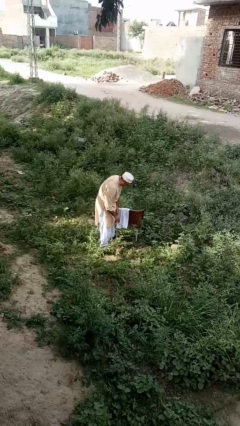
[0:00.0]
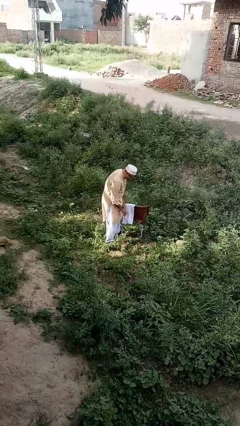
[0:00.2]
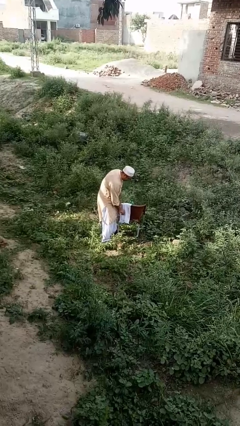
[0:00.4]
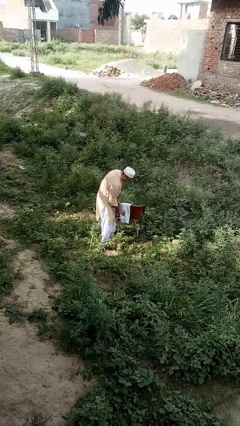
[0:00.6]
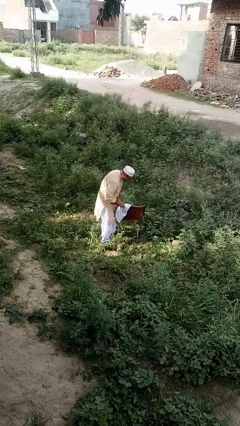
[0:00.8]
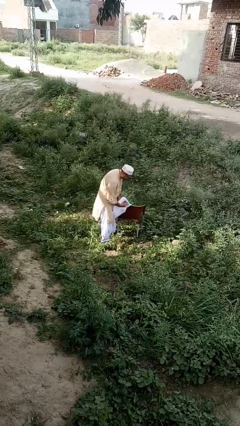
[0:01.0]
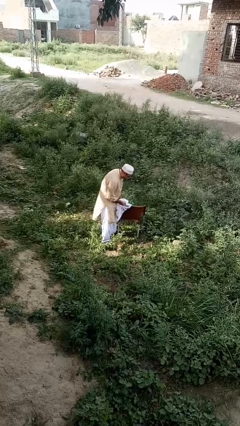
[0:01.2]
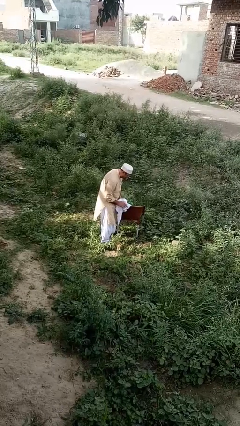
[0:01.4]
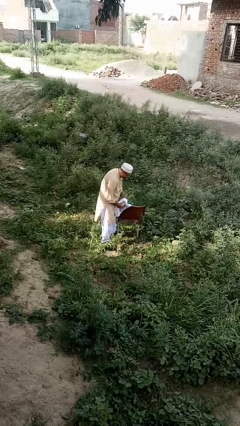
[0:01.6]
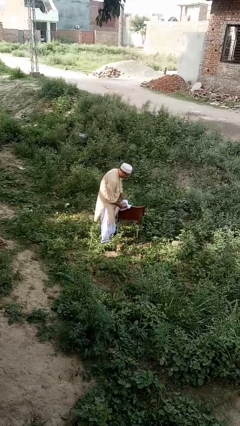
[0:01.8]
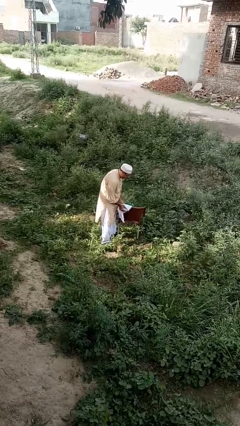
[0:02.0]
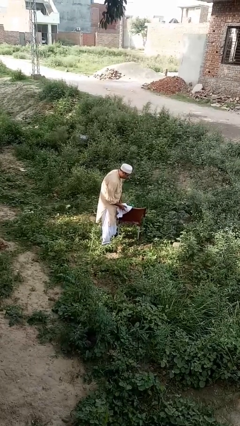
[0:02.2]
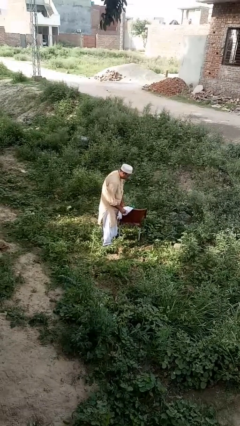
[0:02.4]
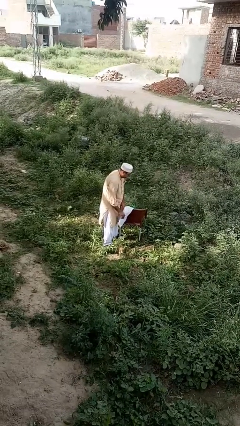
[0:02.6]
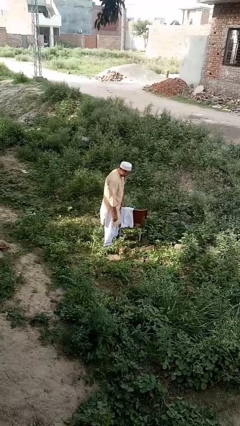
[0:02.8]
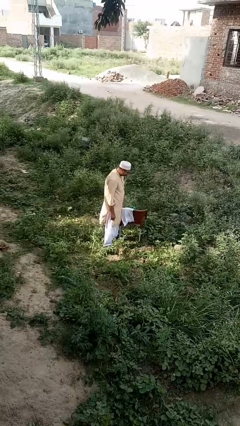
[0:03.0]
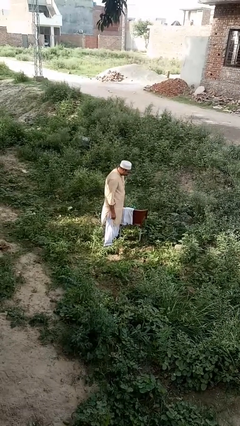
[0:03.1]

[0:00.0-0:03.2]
person dries hands with towel

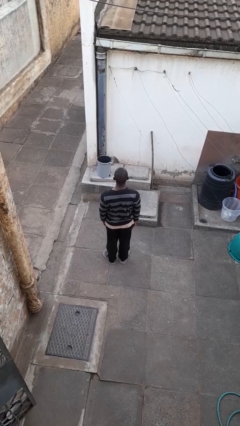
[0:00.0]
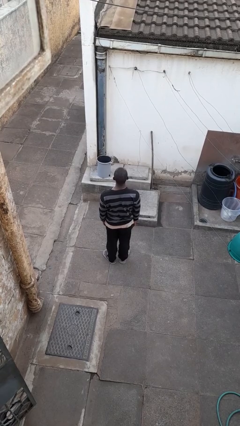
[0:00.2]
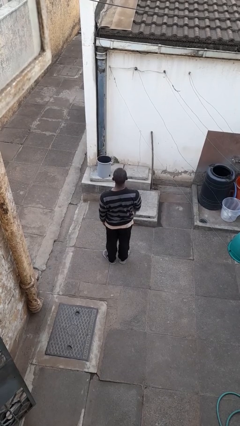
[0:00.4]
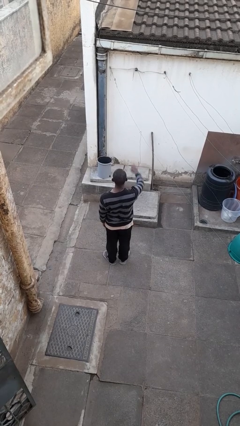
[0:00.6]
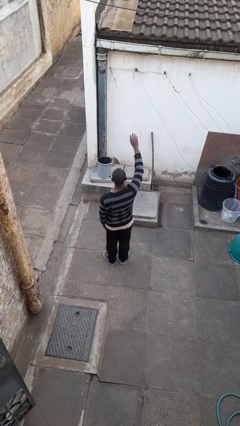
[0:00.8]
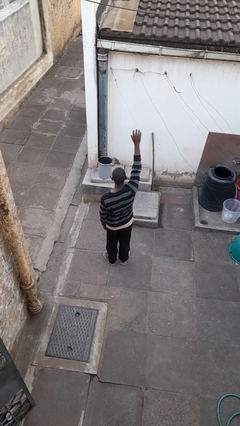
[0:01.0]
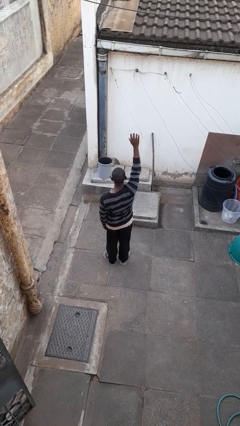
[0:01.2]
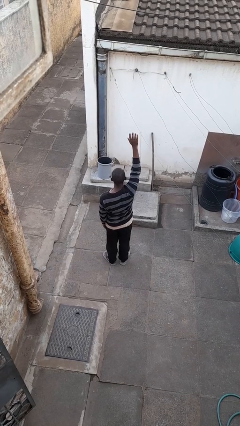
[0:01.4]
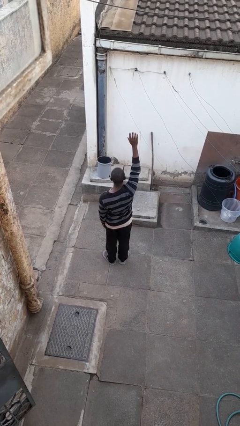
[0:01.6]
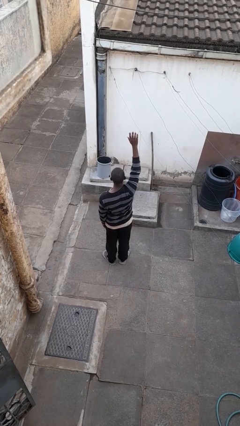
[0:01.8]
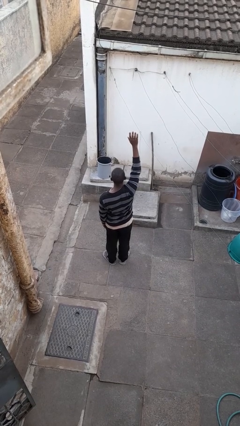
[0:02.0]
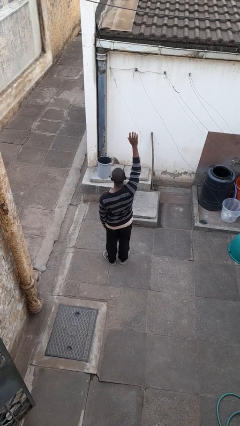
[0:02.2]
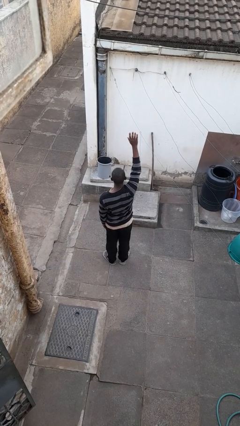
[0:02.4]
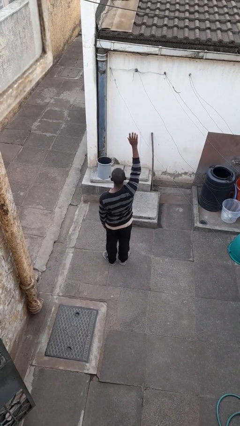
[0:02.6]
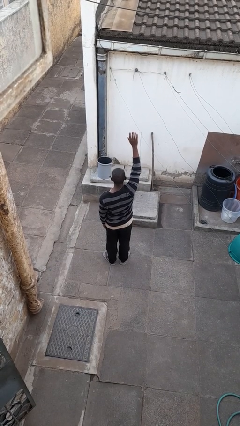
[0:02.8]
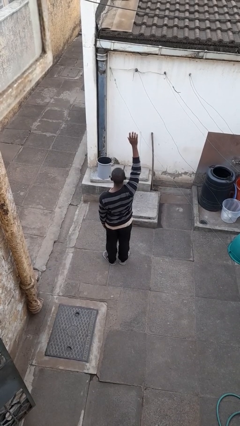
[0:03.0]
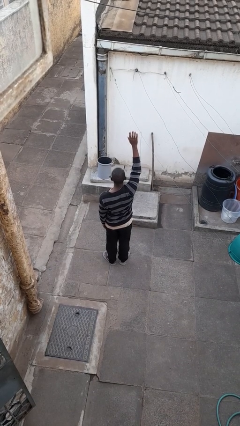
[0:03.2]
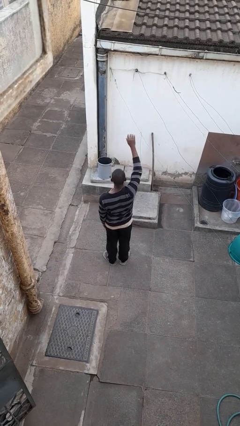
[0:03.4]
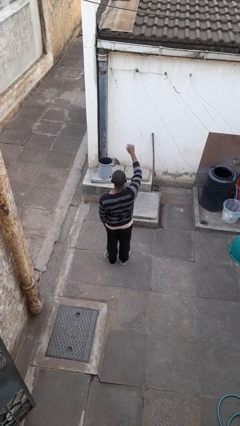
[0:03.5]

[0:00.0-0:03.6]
person gestures raise hand

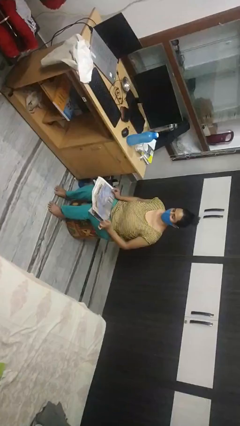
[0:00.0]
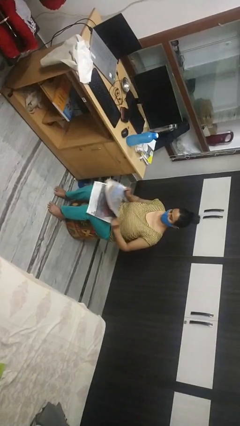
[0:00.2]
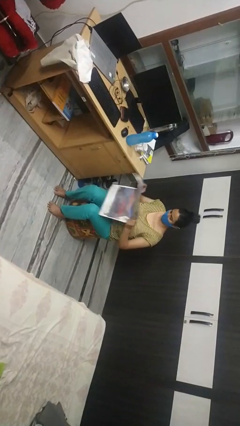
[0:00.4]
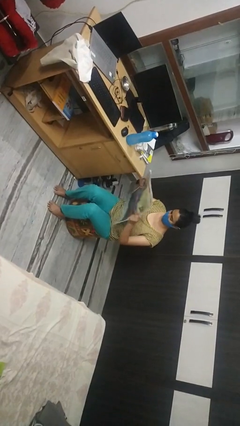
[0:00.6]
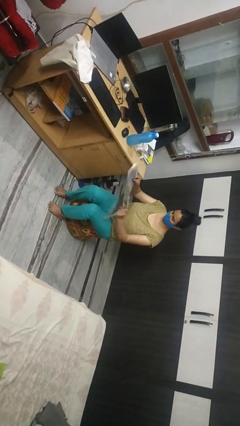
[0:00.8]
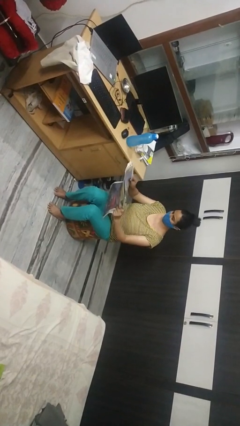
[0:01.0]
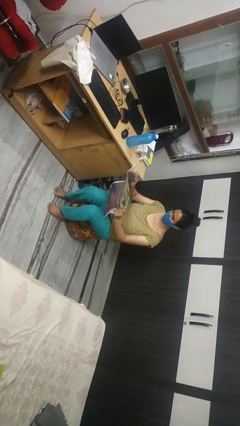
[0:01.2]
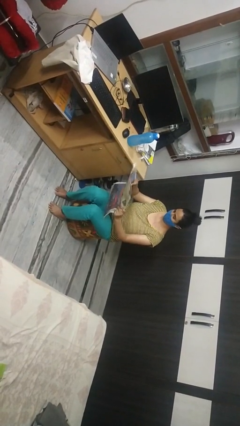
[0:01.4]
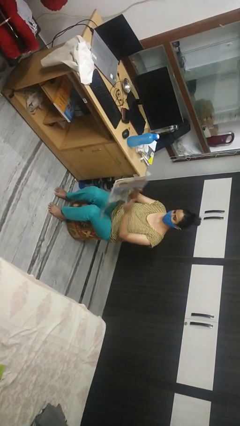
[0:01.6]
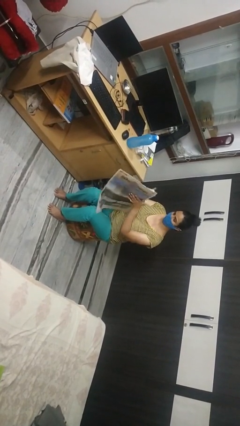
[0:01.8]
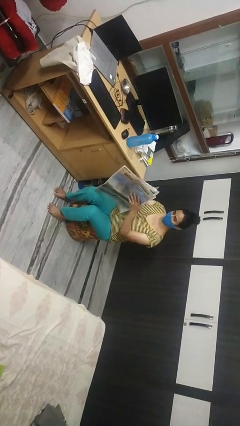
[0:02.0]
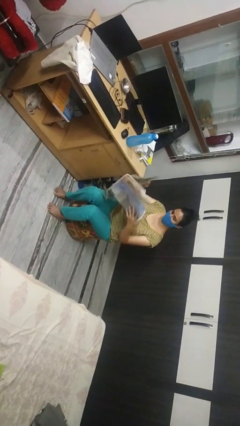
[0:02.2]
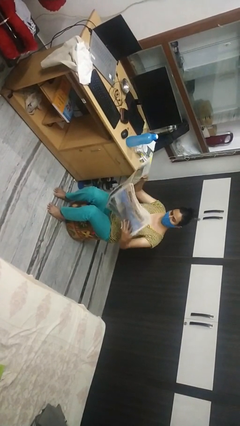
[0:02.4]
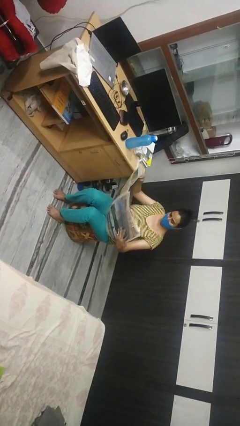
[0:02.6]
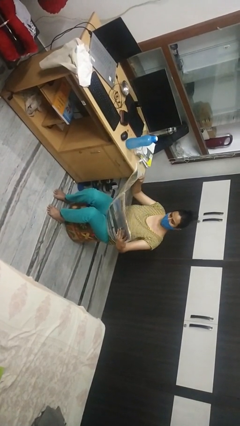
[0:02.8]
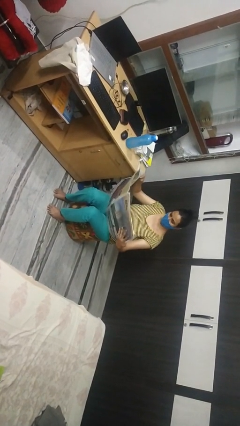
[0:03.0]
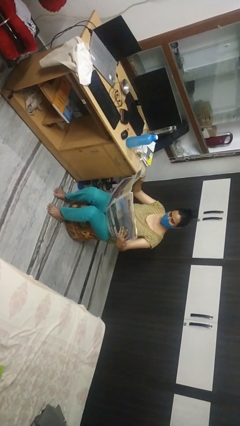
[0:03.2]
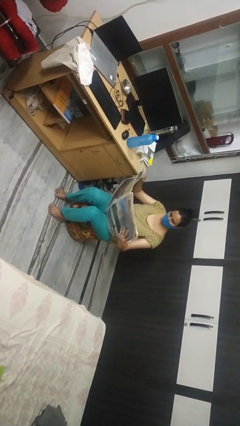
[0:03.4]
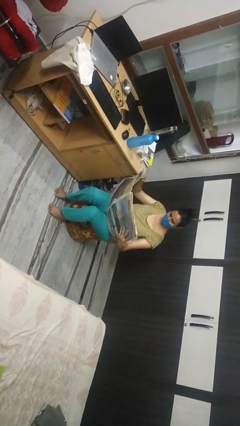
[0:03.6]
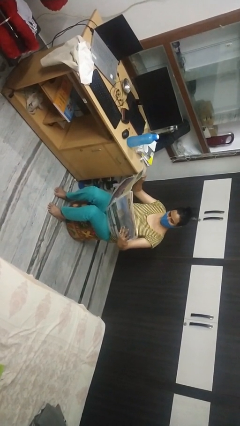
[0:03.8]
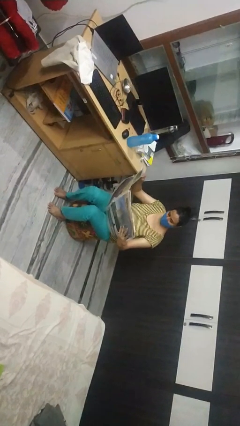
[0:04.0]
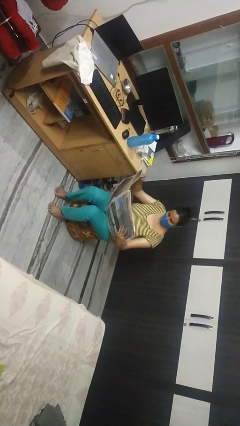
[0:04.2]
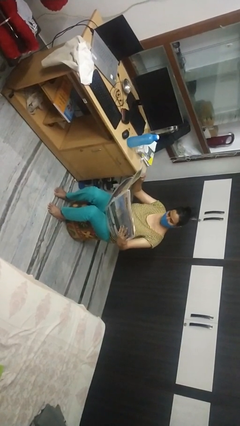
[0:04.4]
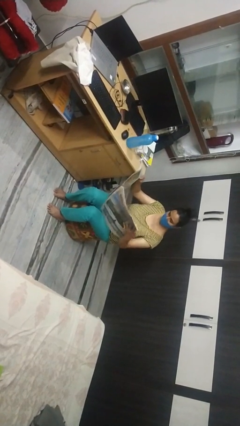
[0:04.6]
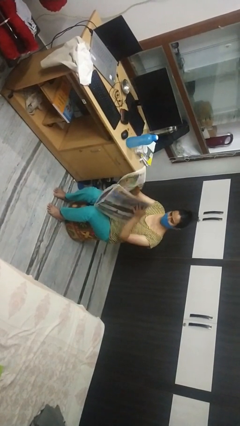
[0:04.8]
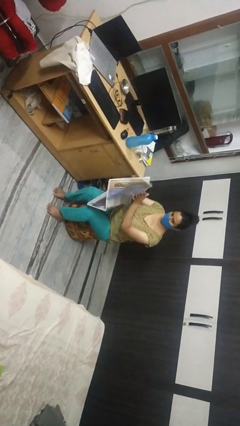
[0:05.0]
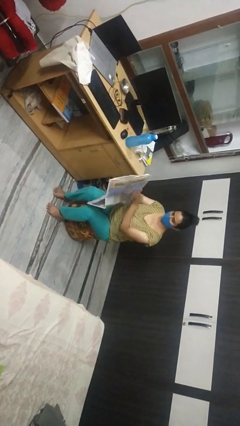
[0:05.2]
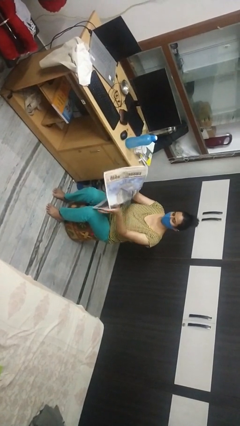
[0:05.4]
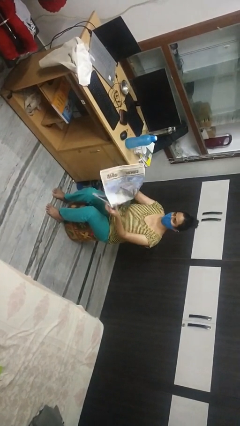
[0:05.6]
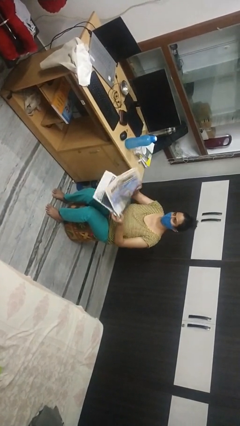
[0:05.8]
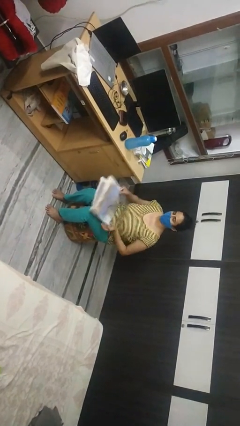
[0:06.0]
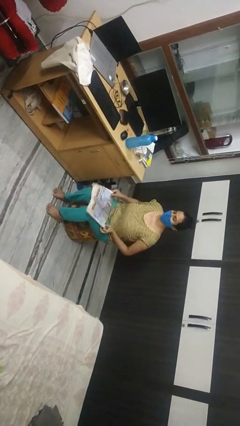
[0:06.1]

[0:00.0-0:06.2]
person reads newspaper

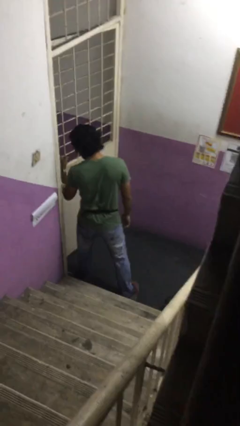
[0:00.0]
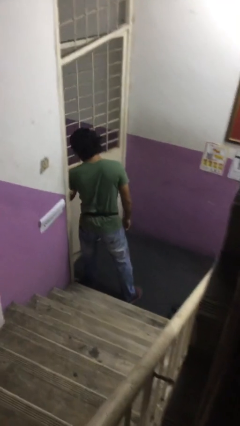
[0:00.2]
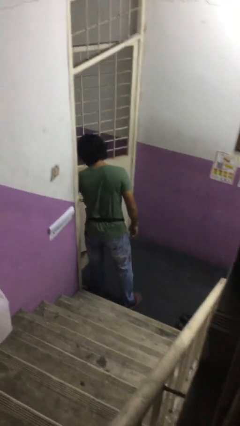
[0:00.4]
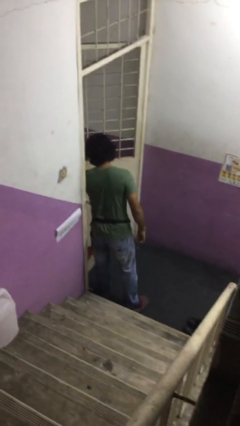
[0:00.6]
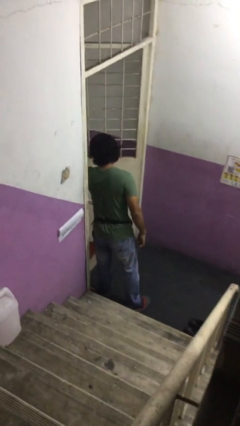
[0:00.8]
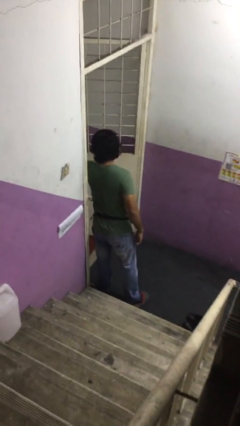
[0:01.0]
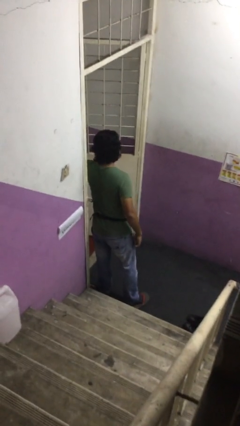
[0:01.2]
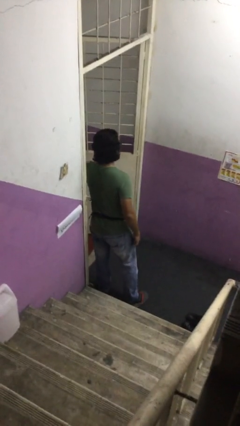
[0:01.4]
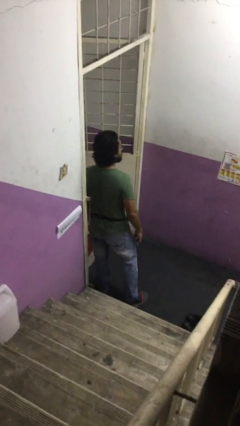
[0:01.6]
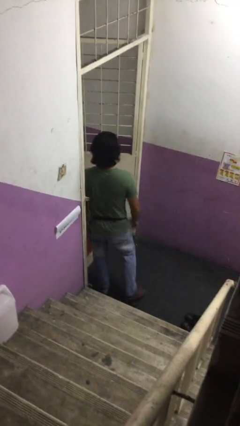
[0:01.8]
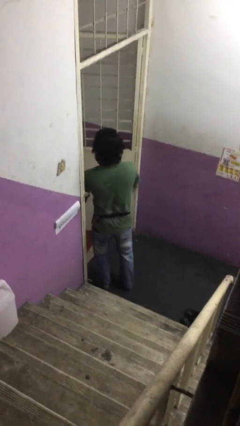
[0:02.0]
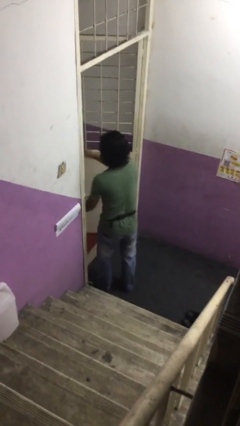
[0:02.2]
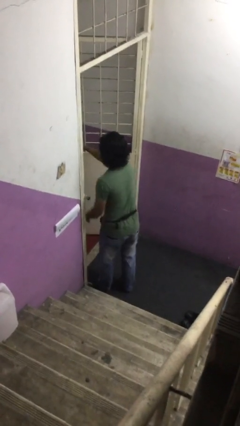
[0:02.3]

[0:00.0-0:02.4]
person opens facility door

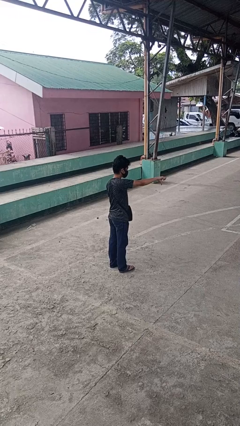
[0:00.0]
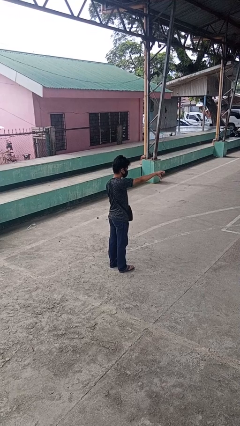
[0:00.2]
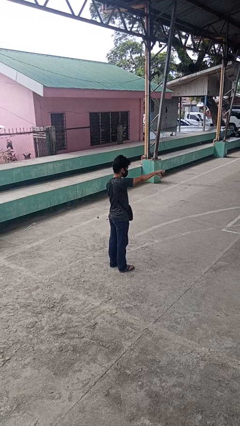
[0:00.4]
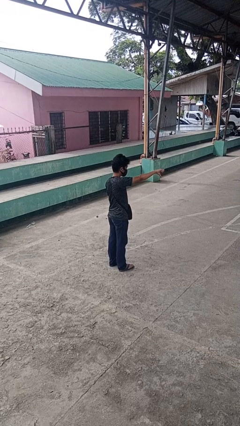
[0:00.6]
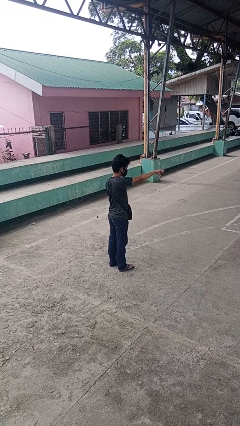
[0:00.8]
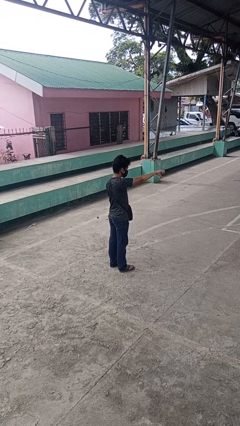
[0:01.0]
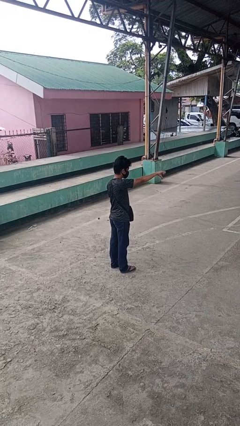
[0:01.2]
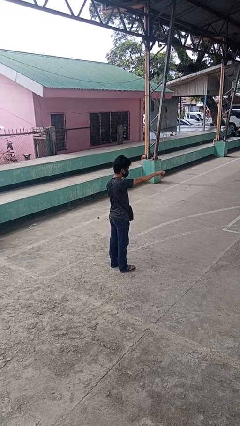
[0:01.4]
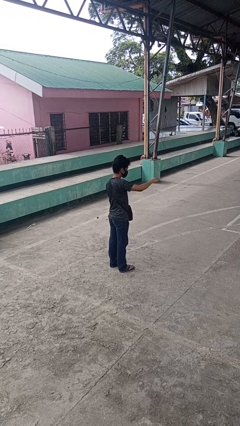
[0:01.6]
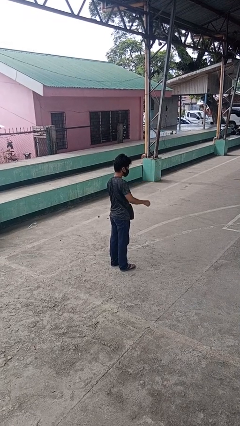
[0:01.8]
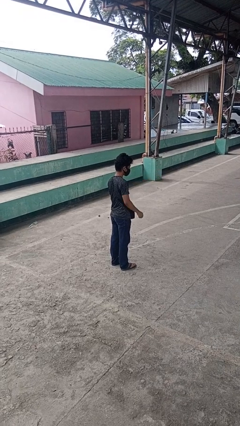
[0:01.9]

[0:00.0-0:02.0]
person gestures thumbs down

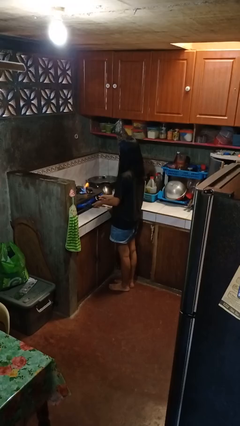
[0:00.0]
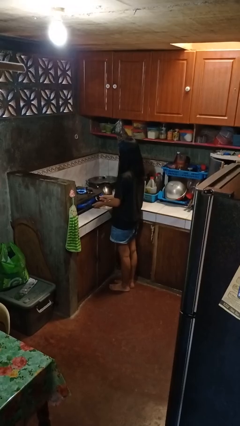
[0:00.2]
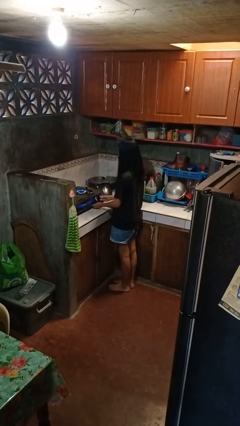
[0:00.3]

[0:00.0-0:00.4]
person turns on stovetop
